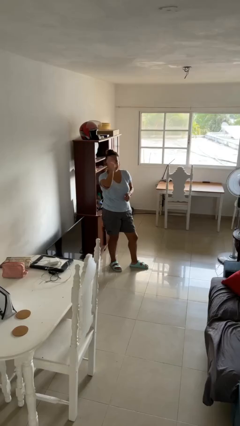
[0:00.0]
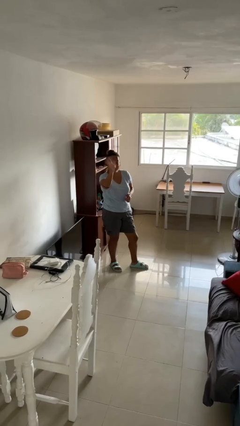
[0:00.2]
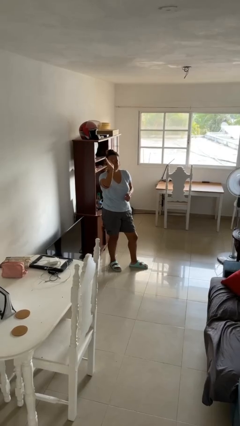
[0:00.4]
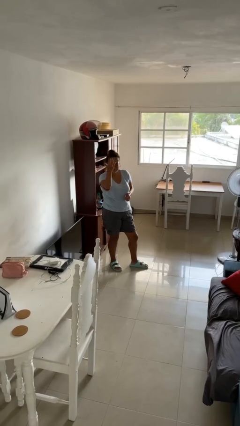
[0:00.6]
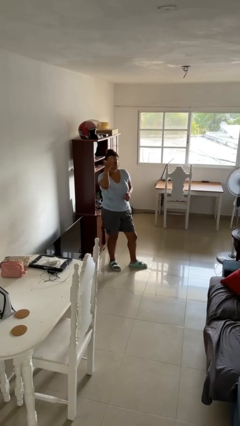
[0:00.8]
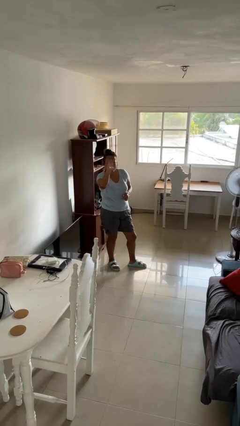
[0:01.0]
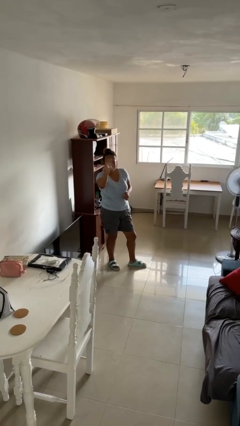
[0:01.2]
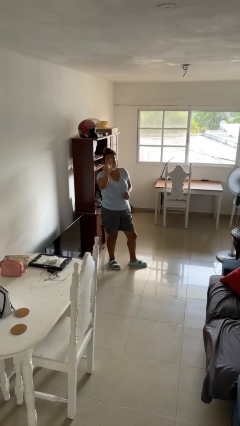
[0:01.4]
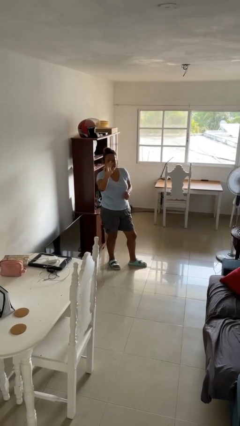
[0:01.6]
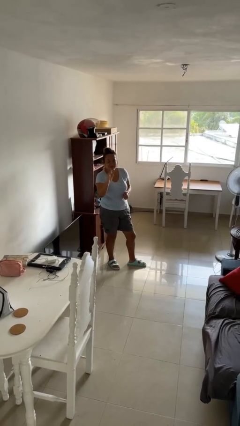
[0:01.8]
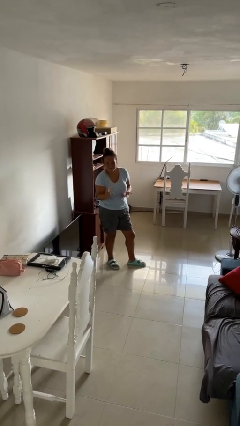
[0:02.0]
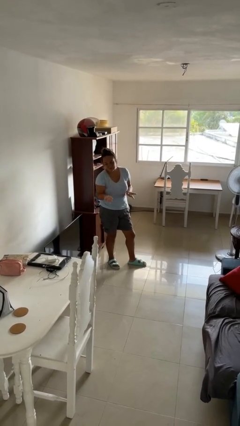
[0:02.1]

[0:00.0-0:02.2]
person waves at person

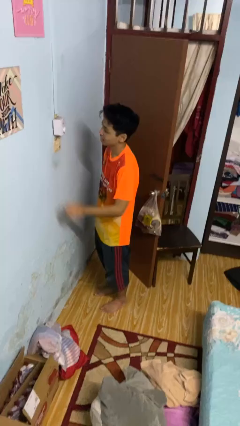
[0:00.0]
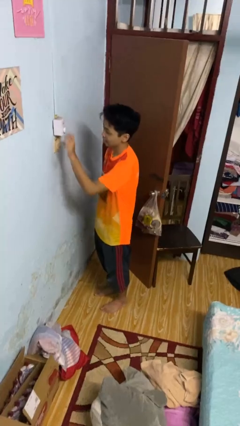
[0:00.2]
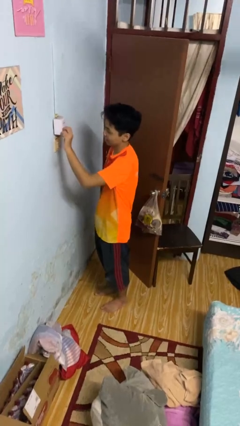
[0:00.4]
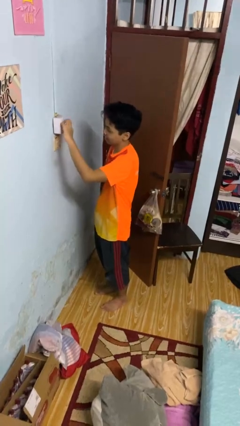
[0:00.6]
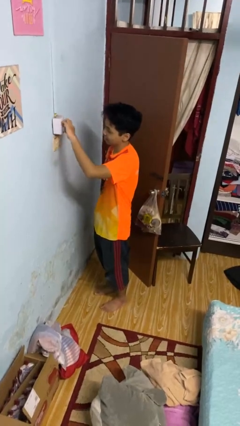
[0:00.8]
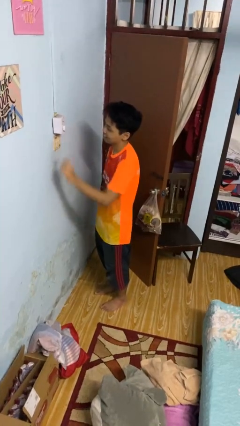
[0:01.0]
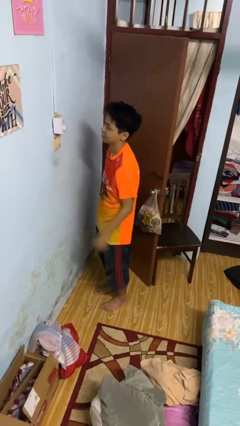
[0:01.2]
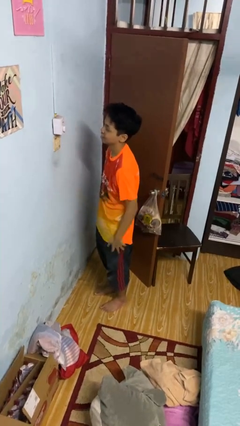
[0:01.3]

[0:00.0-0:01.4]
person adjusts thermostat

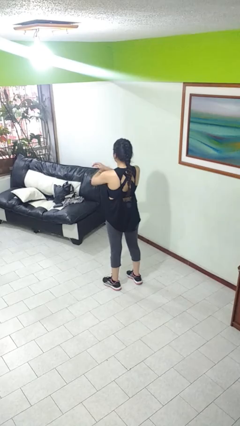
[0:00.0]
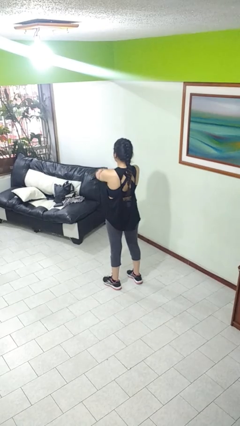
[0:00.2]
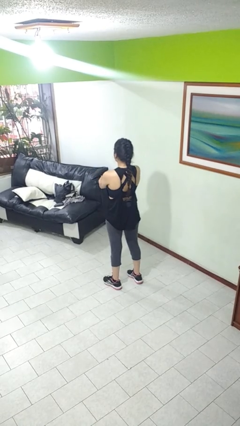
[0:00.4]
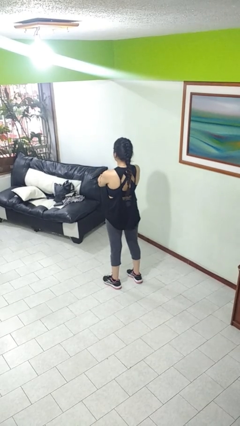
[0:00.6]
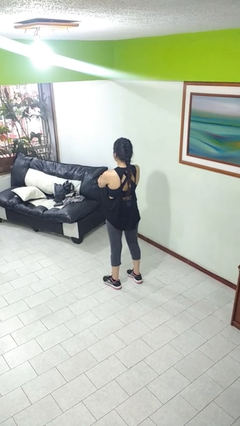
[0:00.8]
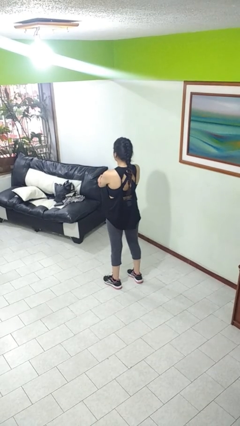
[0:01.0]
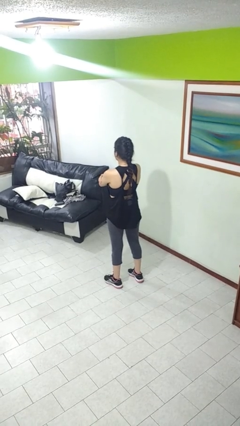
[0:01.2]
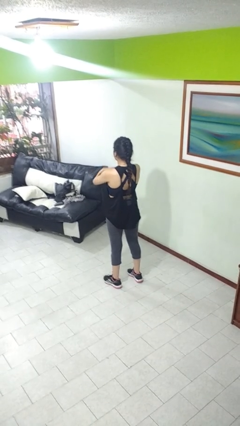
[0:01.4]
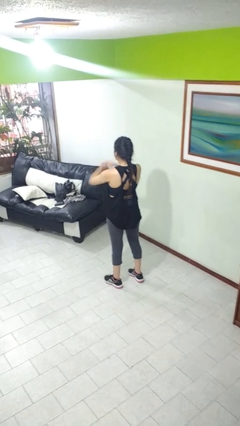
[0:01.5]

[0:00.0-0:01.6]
person crosses arms

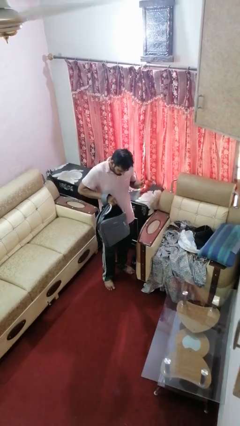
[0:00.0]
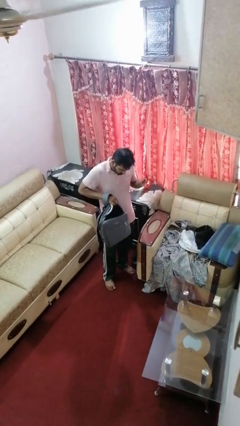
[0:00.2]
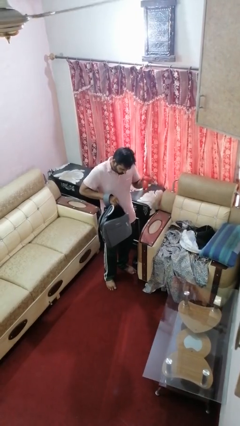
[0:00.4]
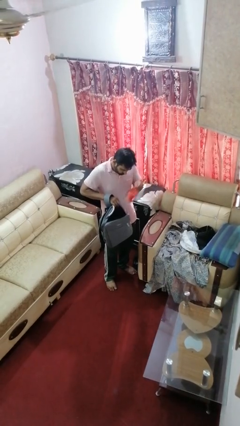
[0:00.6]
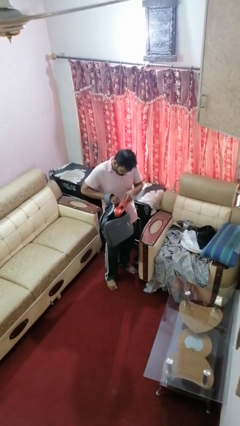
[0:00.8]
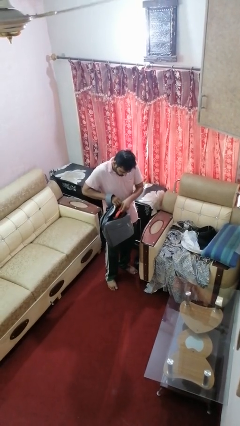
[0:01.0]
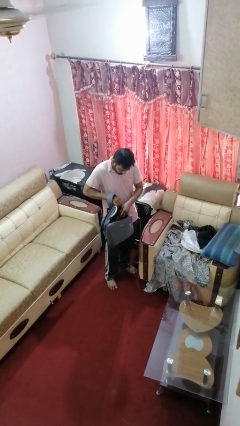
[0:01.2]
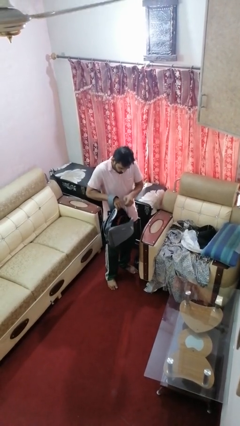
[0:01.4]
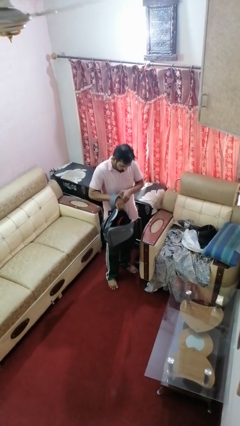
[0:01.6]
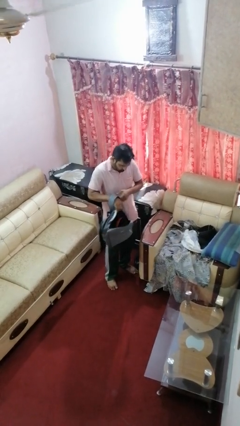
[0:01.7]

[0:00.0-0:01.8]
person puts object into backpack

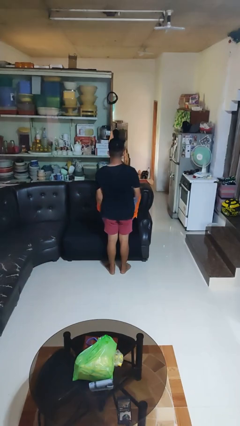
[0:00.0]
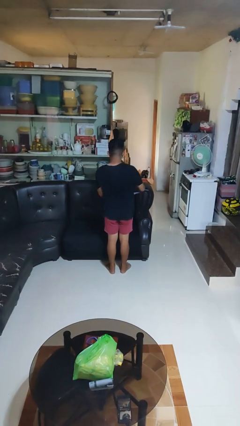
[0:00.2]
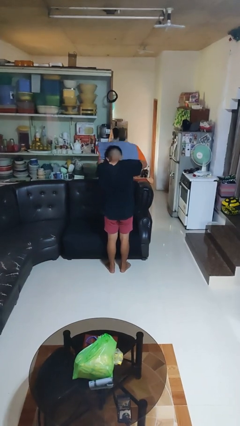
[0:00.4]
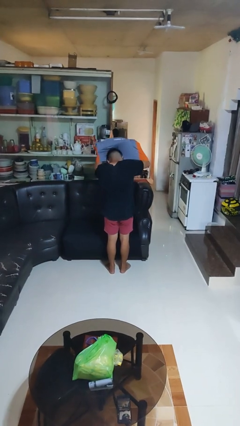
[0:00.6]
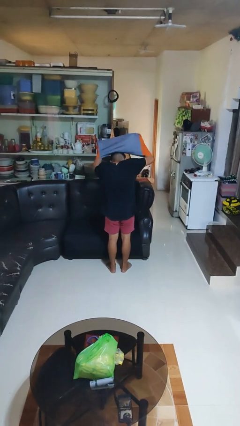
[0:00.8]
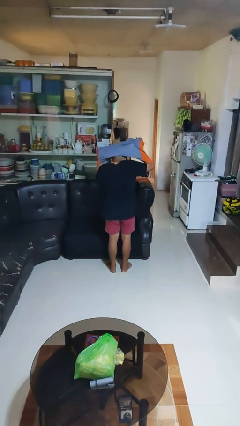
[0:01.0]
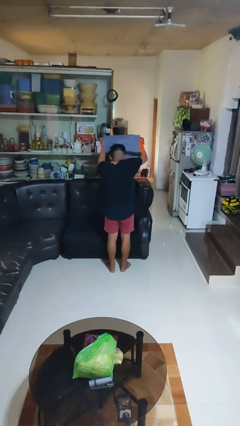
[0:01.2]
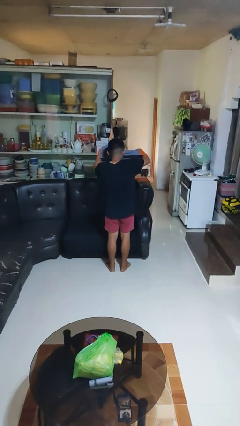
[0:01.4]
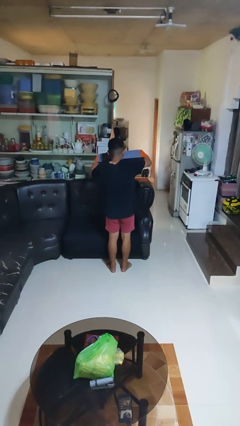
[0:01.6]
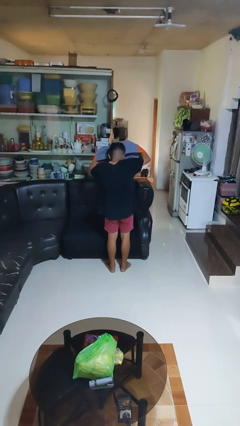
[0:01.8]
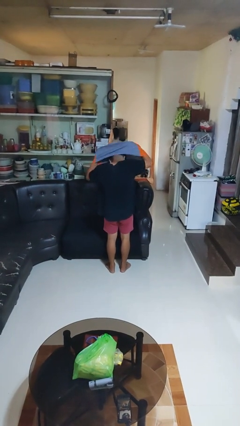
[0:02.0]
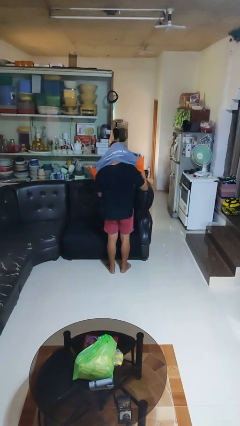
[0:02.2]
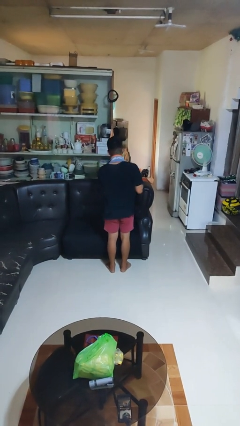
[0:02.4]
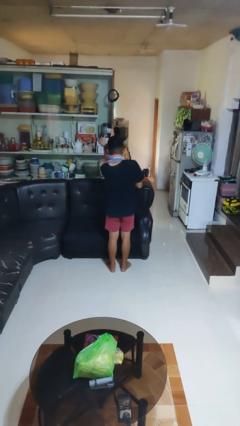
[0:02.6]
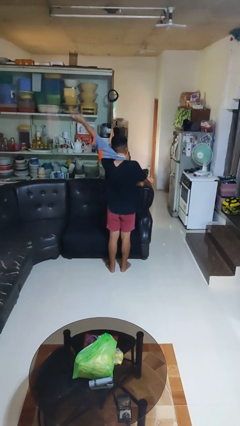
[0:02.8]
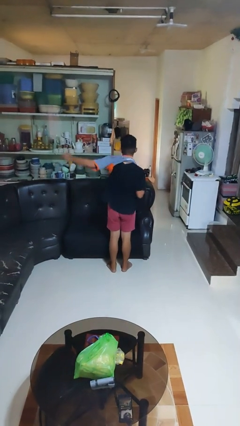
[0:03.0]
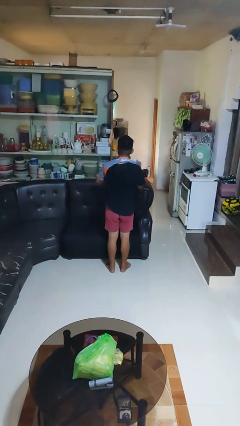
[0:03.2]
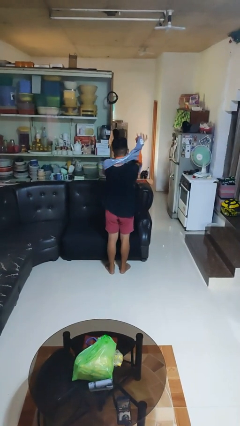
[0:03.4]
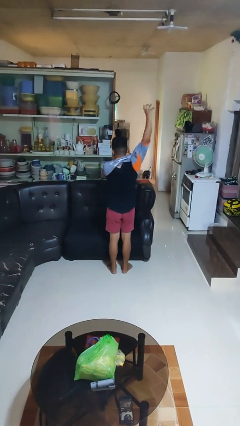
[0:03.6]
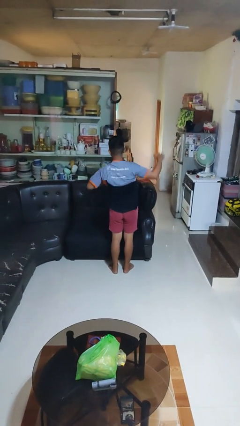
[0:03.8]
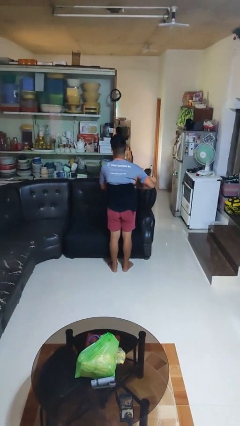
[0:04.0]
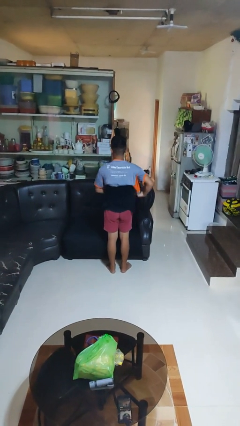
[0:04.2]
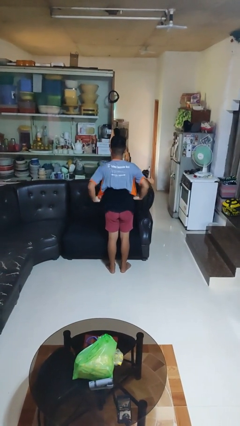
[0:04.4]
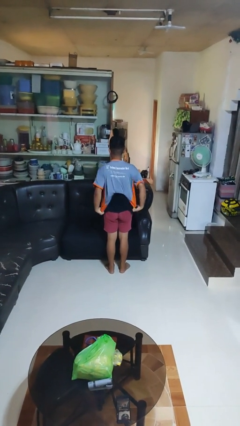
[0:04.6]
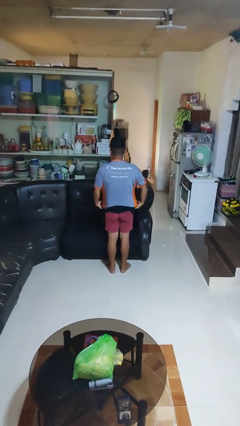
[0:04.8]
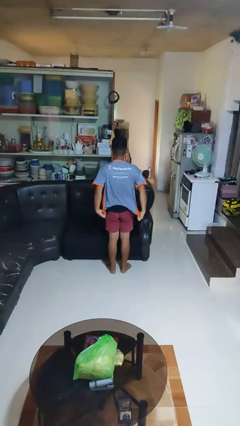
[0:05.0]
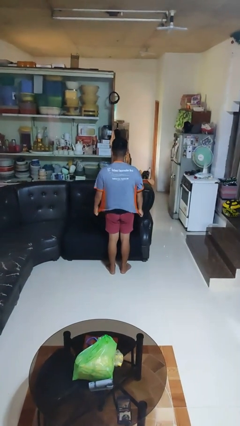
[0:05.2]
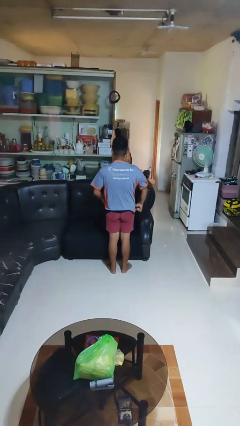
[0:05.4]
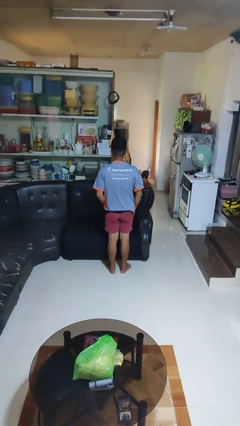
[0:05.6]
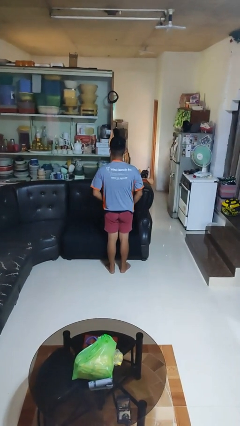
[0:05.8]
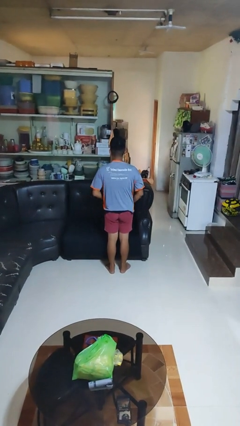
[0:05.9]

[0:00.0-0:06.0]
person puts on shirt

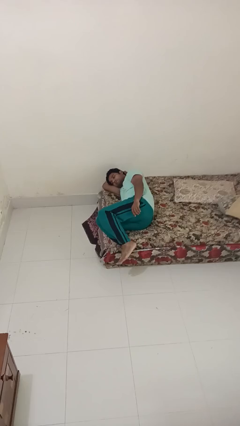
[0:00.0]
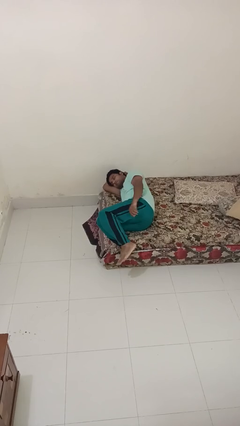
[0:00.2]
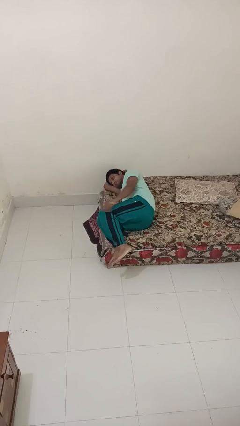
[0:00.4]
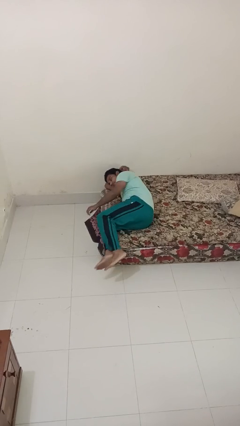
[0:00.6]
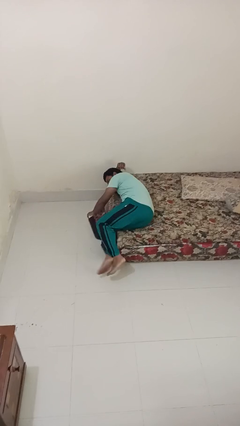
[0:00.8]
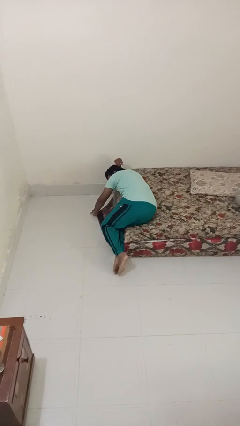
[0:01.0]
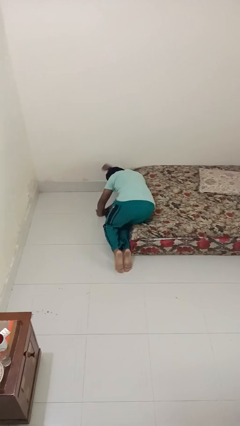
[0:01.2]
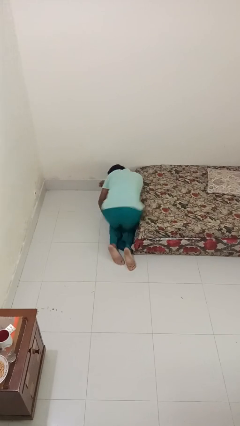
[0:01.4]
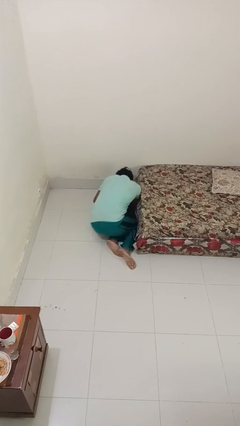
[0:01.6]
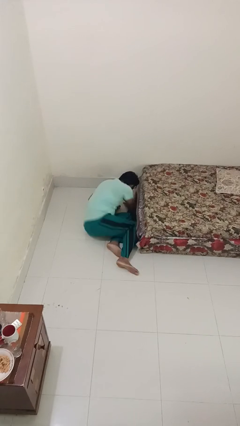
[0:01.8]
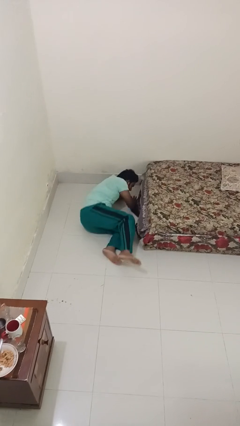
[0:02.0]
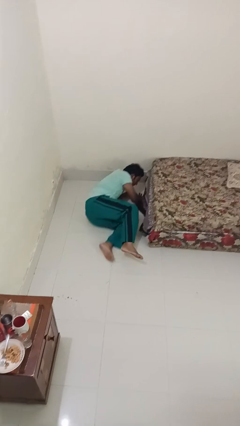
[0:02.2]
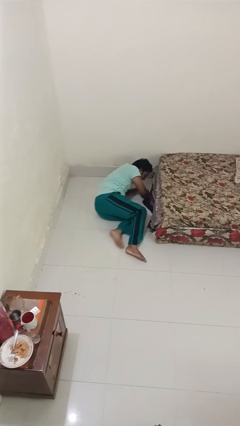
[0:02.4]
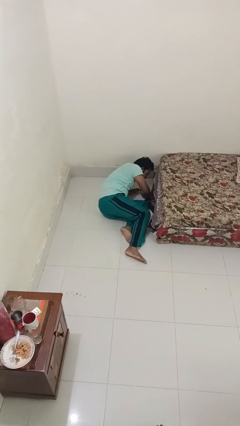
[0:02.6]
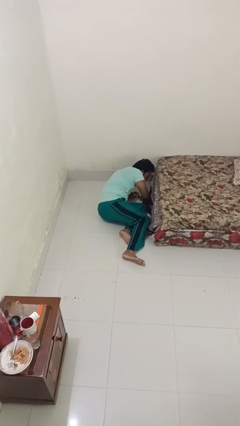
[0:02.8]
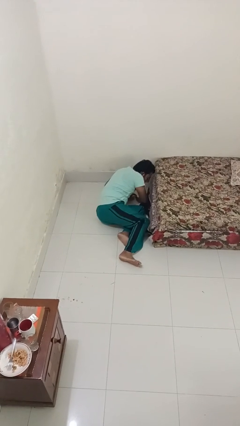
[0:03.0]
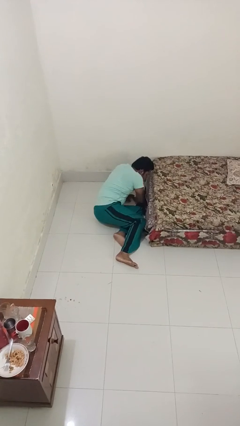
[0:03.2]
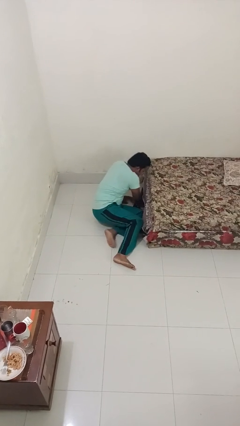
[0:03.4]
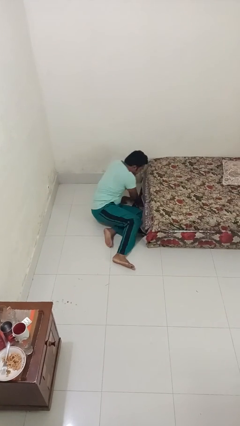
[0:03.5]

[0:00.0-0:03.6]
person falls from bed

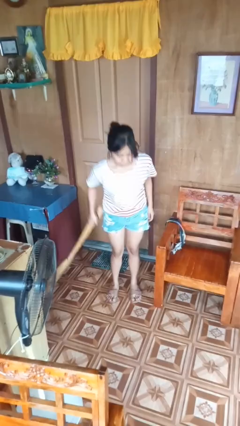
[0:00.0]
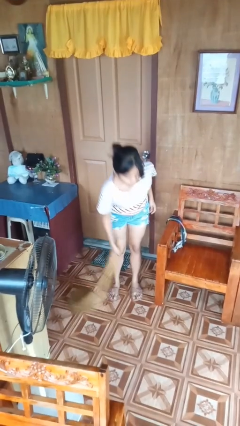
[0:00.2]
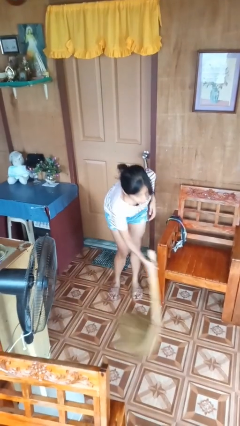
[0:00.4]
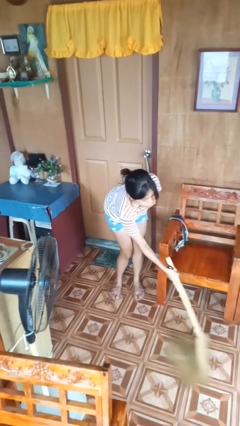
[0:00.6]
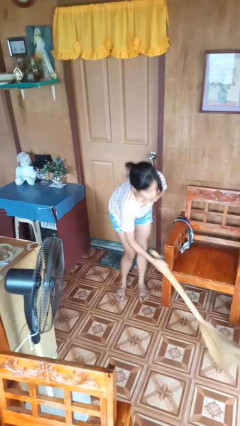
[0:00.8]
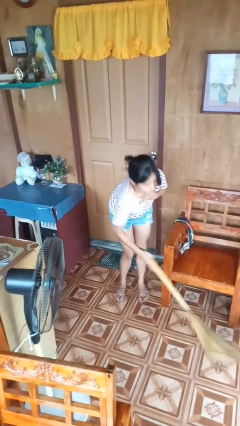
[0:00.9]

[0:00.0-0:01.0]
person sweeps floor
